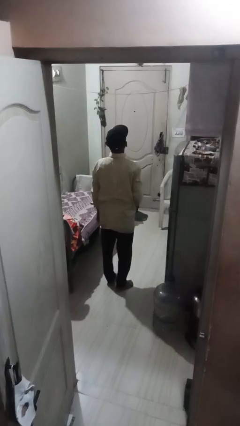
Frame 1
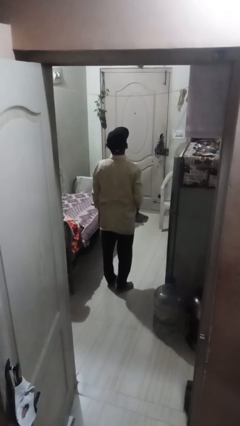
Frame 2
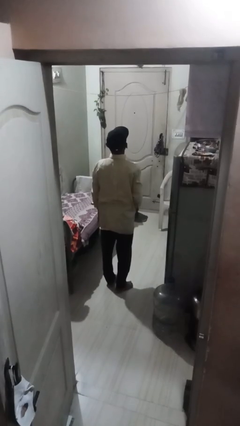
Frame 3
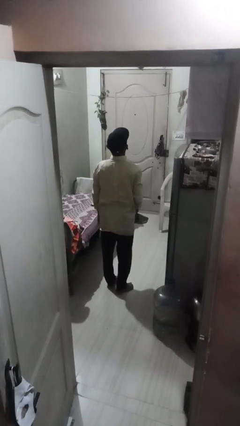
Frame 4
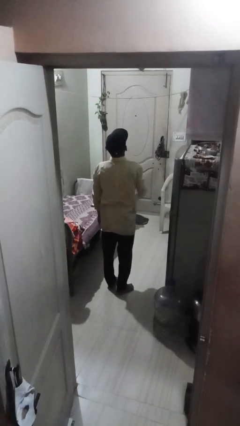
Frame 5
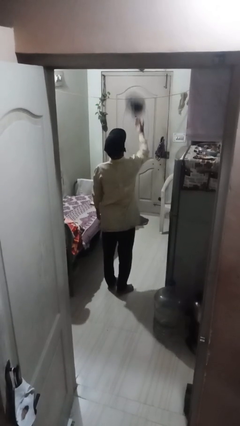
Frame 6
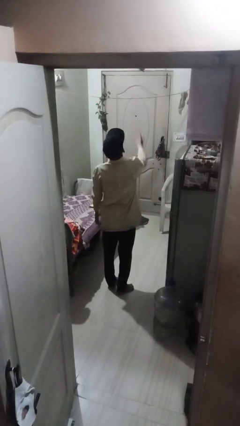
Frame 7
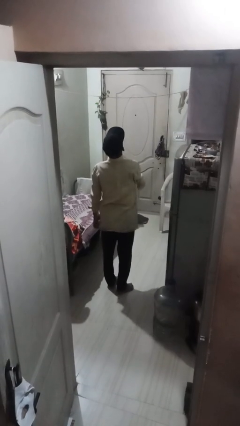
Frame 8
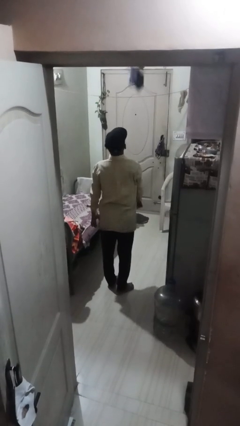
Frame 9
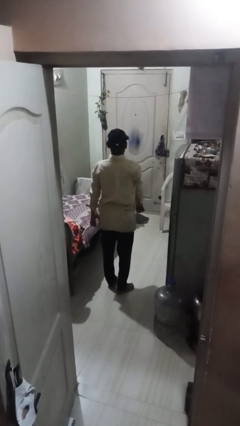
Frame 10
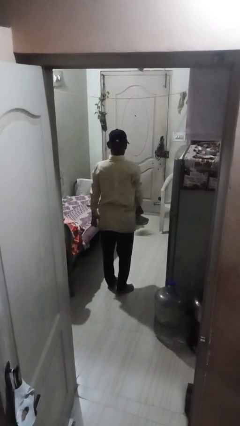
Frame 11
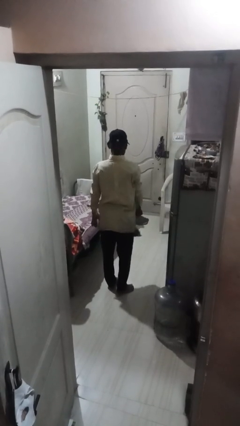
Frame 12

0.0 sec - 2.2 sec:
person throws object into air

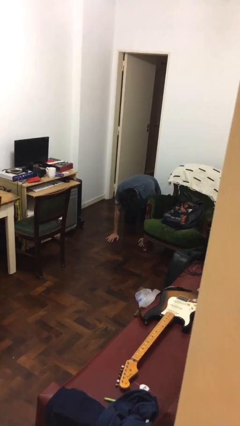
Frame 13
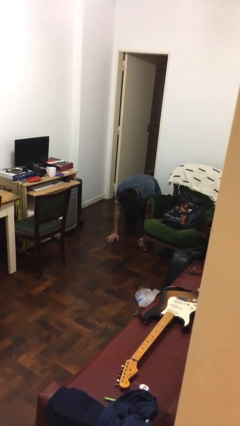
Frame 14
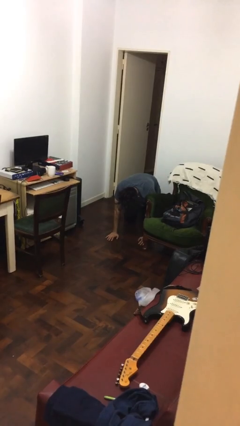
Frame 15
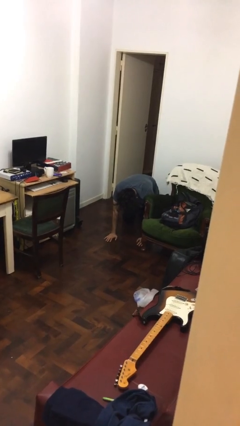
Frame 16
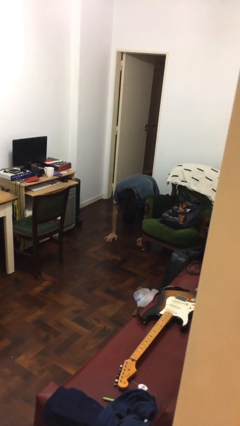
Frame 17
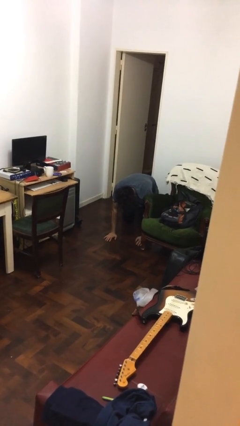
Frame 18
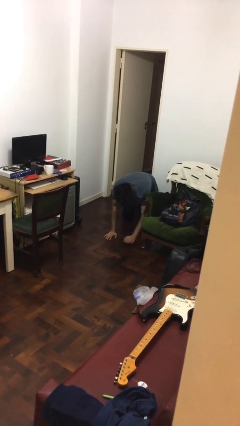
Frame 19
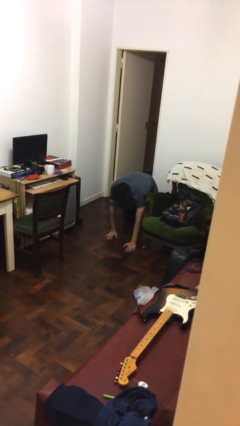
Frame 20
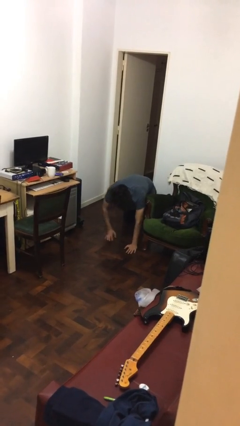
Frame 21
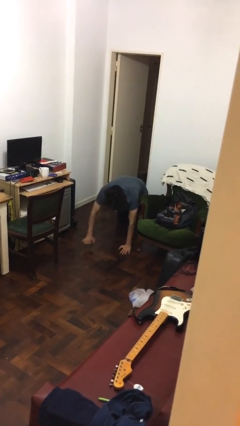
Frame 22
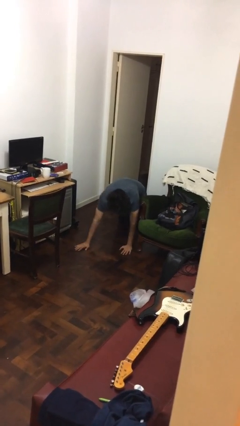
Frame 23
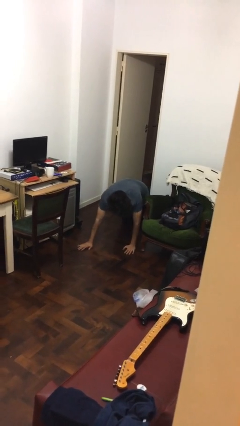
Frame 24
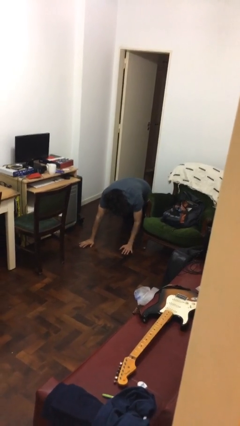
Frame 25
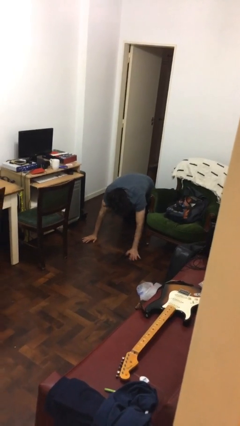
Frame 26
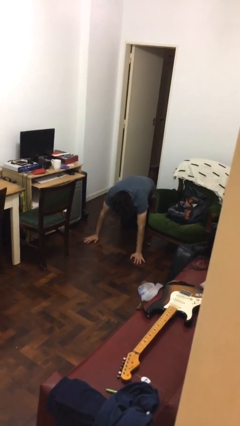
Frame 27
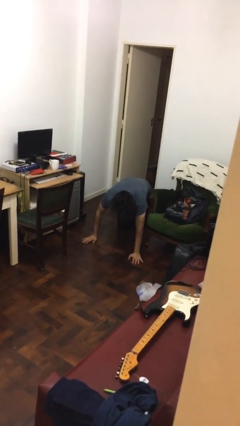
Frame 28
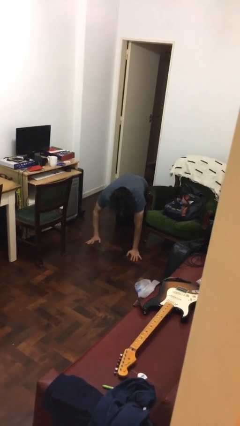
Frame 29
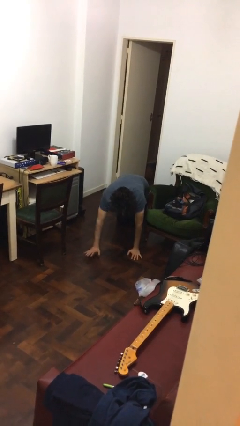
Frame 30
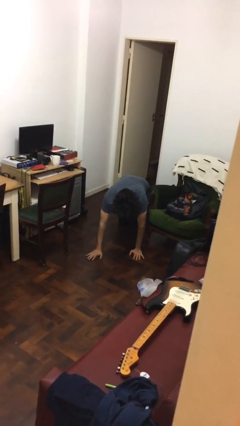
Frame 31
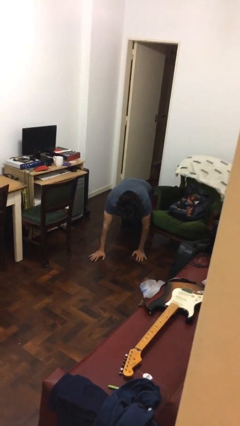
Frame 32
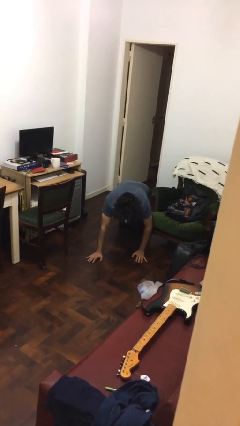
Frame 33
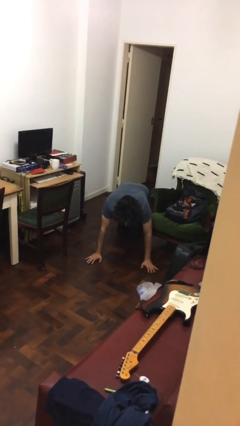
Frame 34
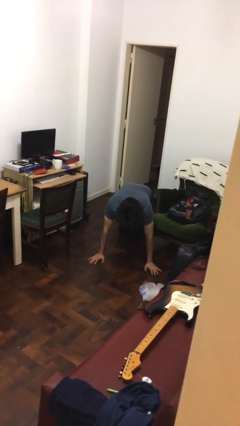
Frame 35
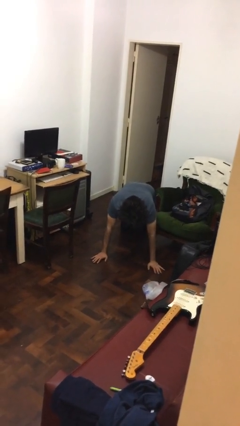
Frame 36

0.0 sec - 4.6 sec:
person crawls

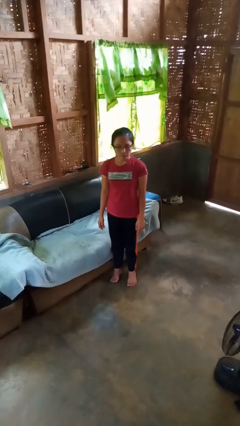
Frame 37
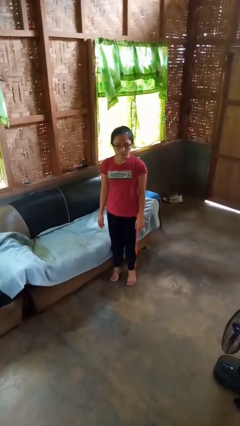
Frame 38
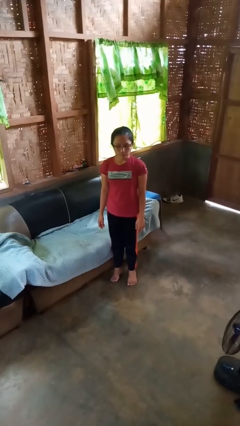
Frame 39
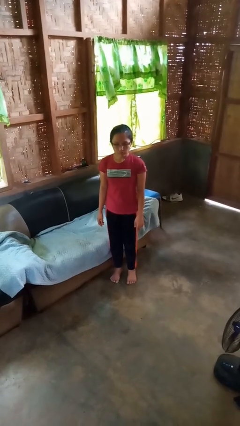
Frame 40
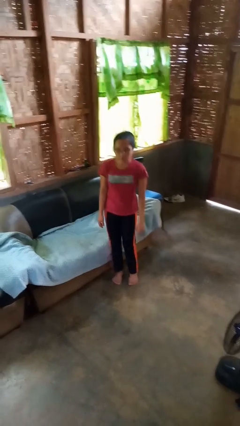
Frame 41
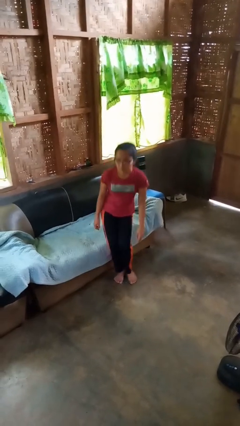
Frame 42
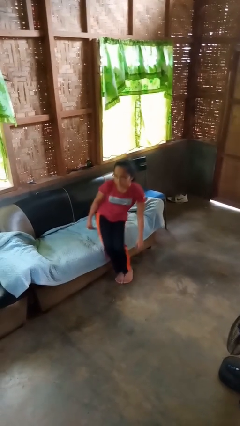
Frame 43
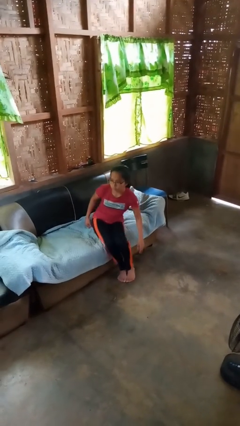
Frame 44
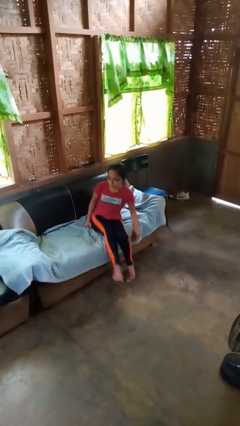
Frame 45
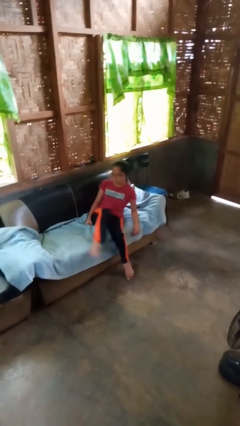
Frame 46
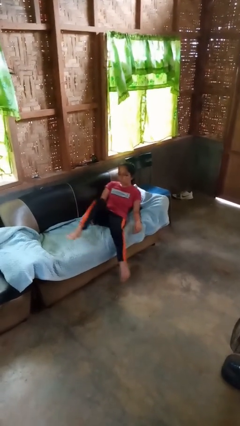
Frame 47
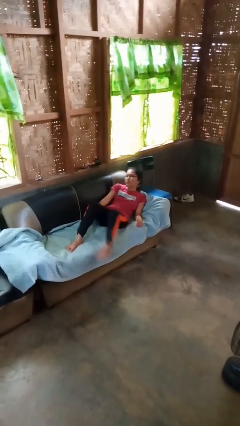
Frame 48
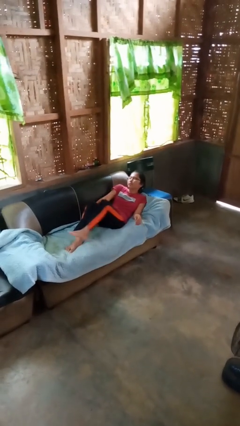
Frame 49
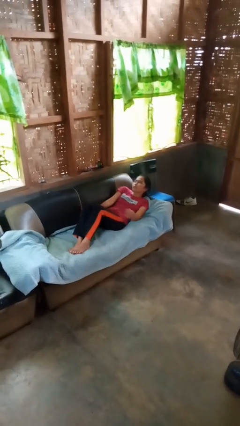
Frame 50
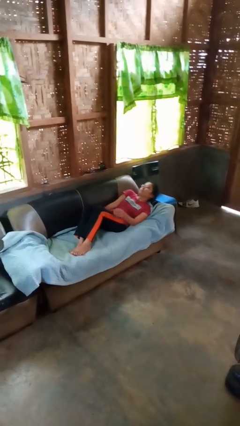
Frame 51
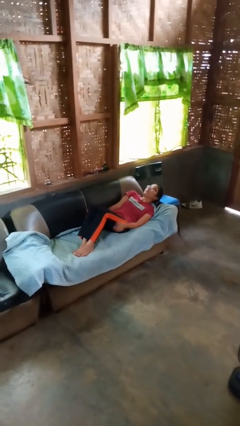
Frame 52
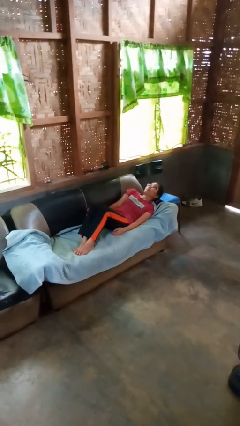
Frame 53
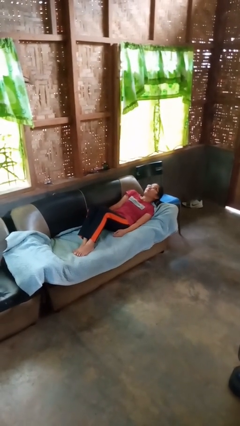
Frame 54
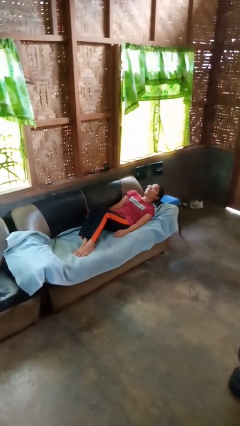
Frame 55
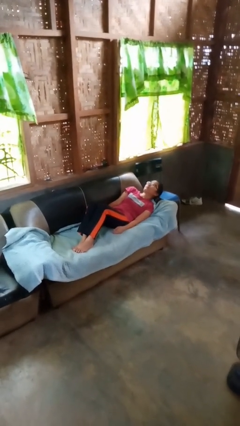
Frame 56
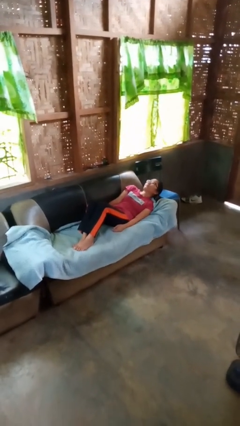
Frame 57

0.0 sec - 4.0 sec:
person lies down on couch

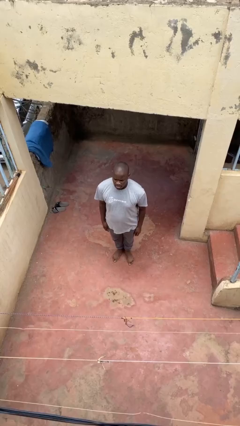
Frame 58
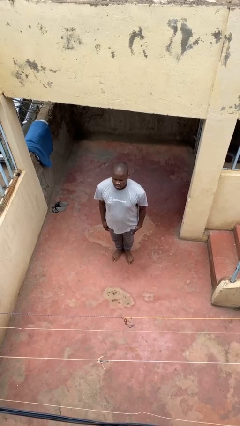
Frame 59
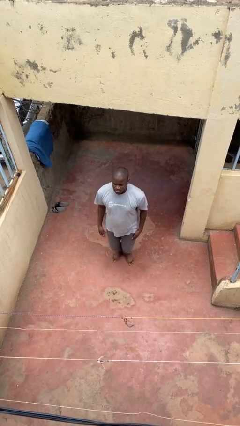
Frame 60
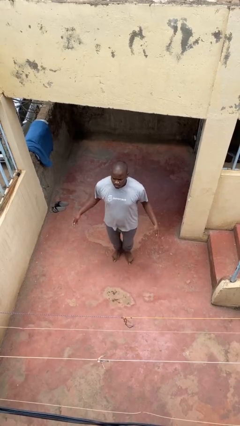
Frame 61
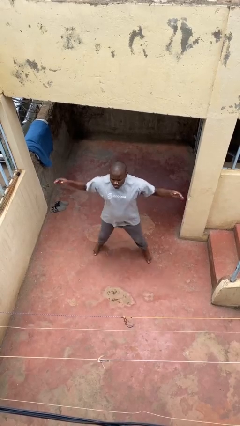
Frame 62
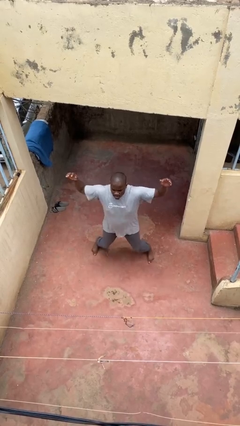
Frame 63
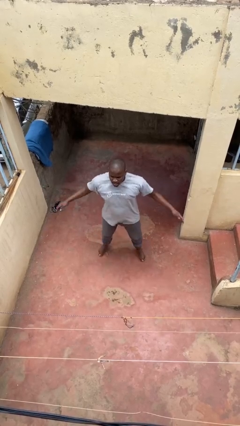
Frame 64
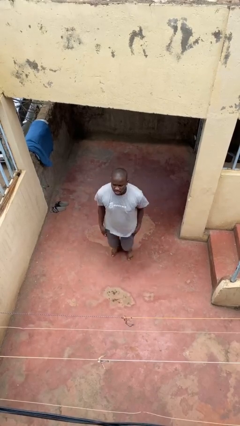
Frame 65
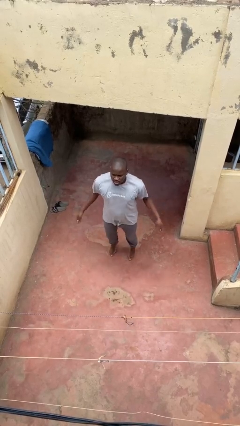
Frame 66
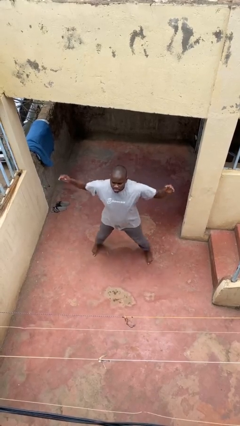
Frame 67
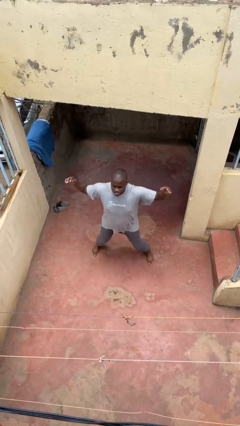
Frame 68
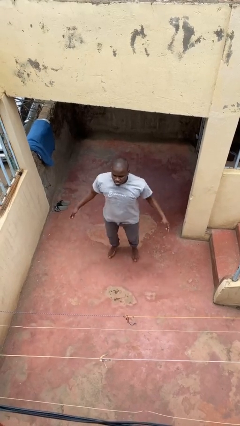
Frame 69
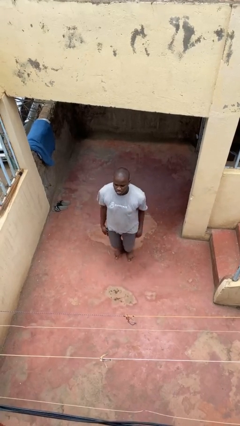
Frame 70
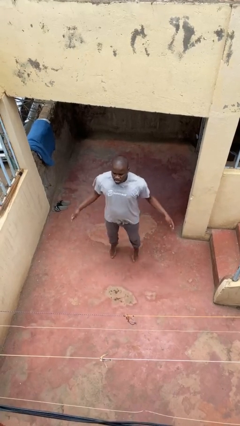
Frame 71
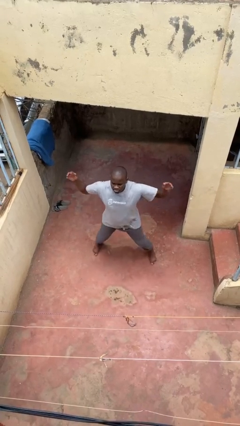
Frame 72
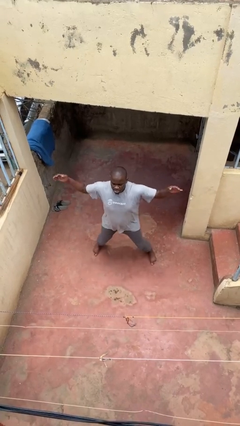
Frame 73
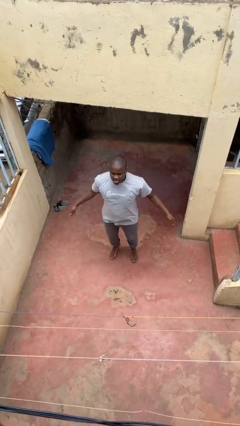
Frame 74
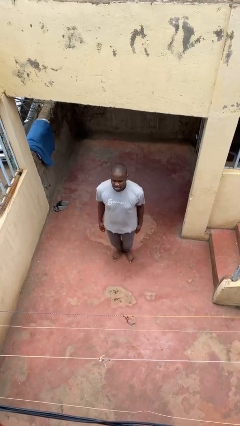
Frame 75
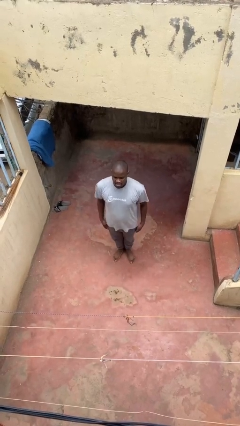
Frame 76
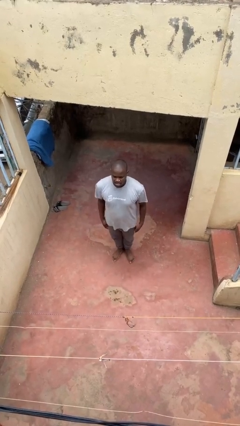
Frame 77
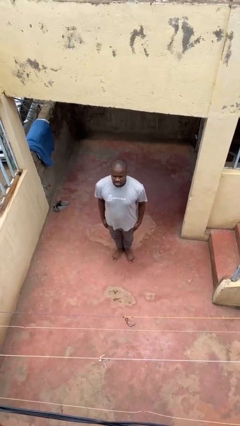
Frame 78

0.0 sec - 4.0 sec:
person exercises with jumping jacks

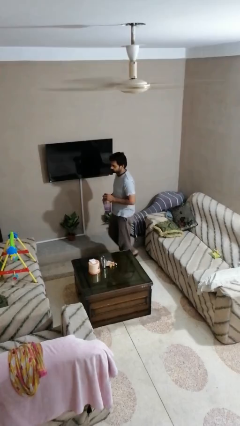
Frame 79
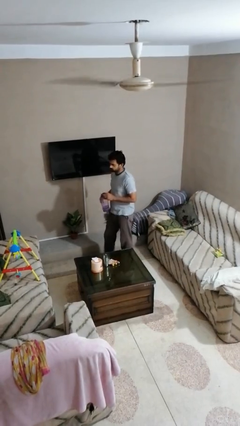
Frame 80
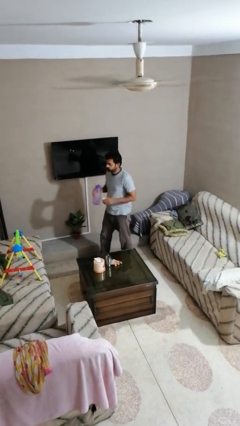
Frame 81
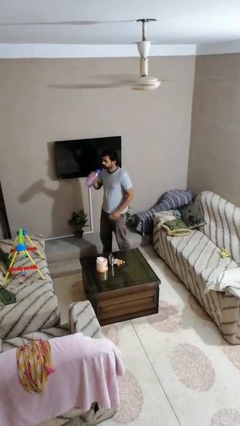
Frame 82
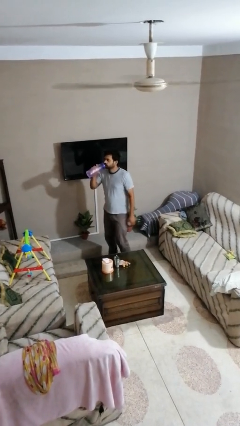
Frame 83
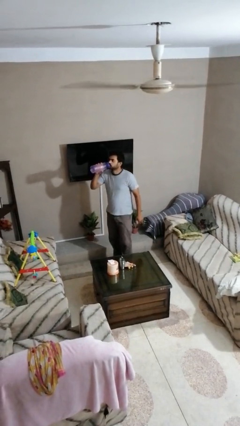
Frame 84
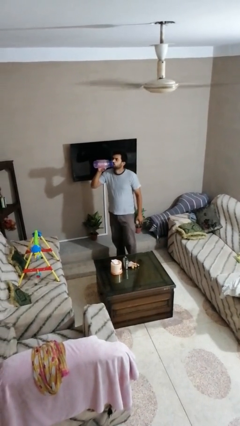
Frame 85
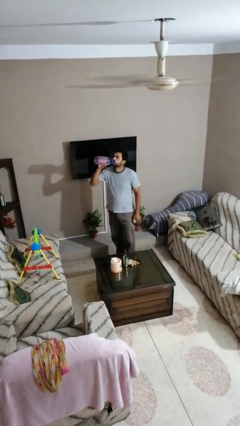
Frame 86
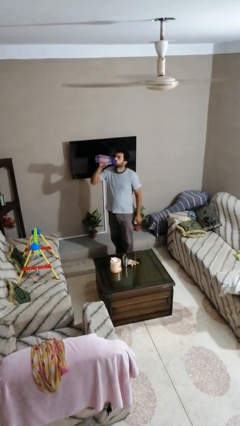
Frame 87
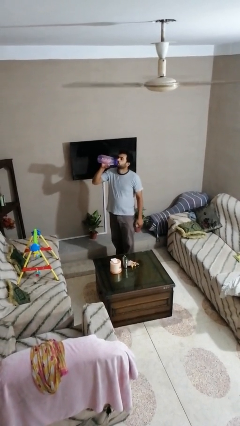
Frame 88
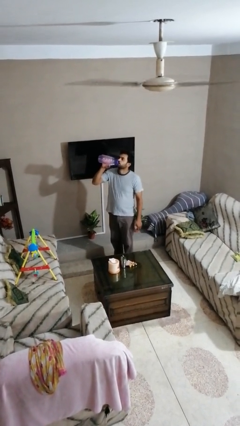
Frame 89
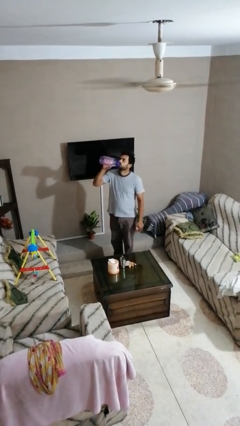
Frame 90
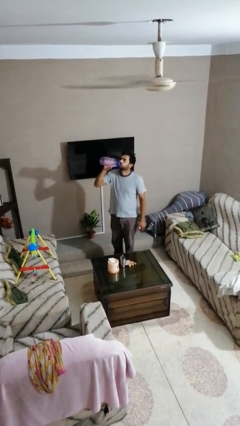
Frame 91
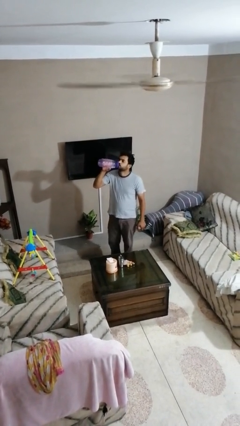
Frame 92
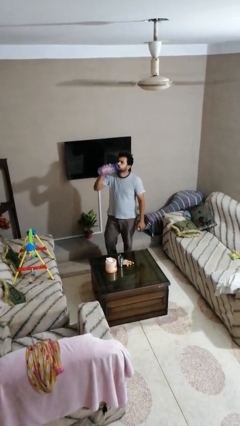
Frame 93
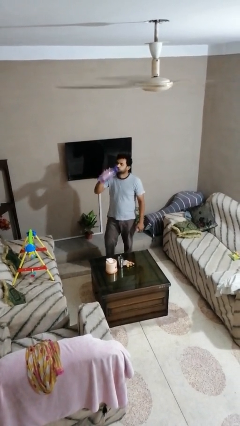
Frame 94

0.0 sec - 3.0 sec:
person drinks from bottle
